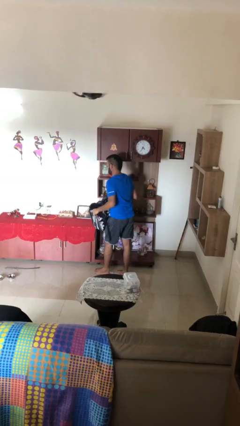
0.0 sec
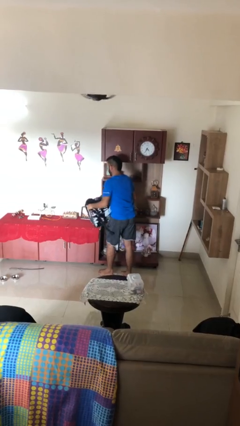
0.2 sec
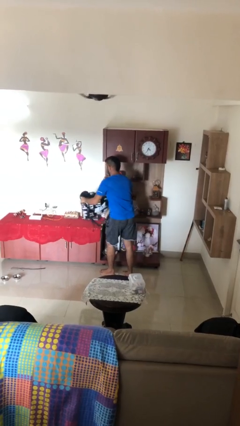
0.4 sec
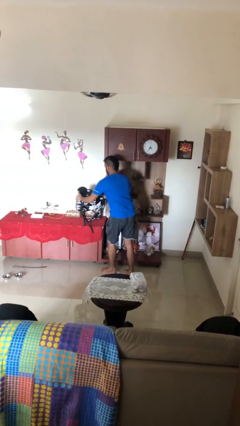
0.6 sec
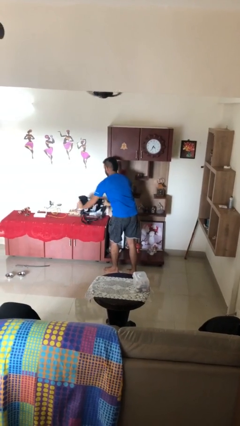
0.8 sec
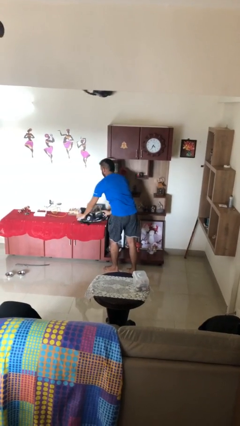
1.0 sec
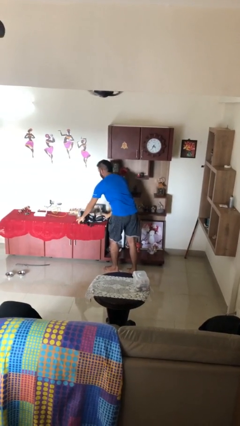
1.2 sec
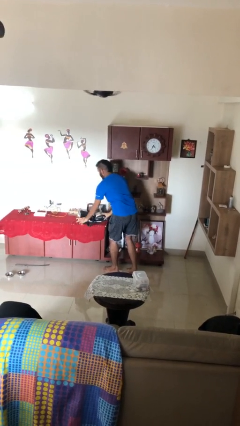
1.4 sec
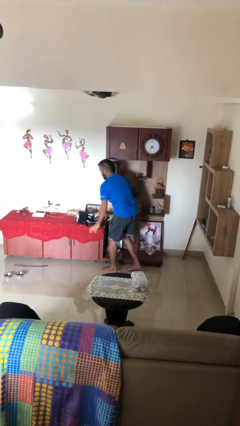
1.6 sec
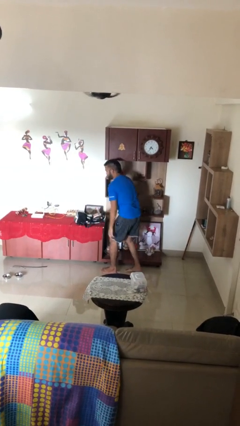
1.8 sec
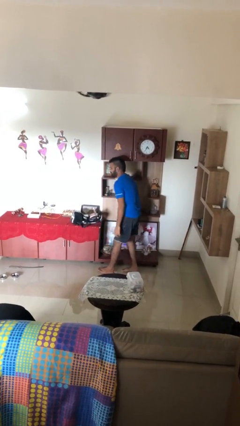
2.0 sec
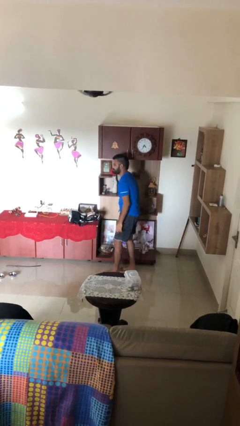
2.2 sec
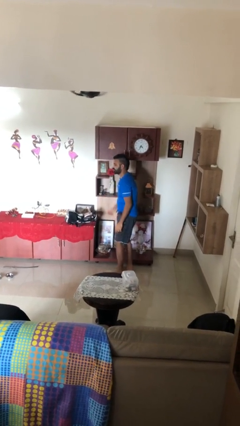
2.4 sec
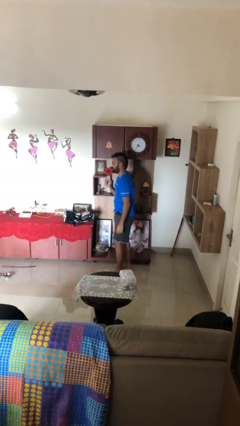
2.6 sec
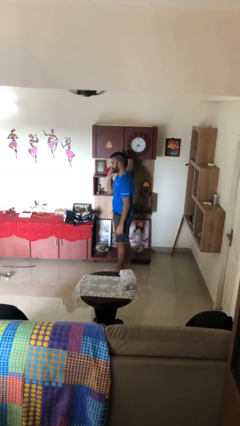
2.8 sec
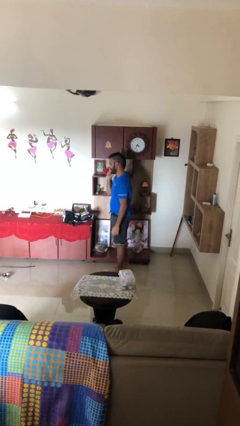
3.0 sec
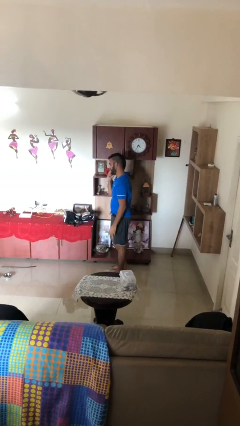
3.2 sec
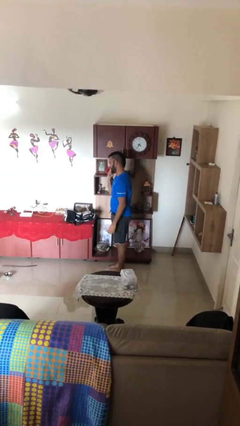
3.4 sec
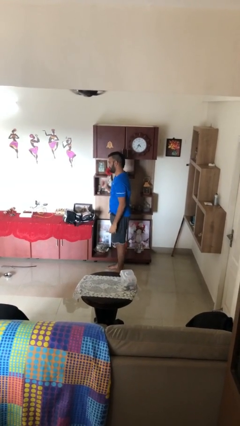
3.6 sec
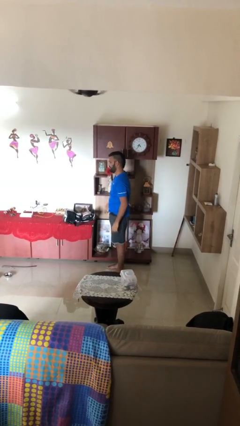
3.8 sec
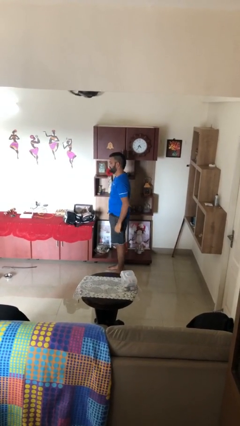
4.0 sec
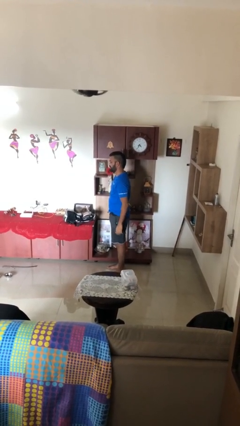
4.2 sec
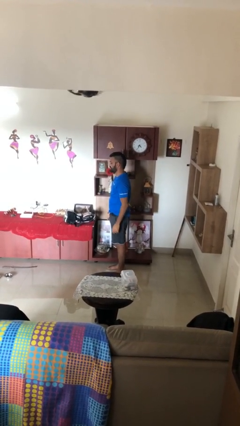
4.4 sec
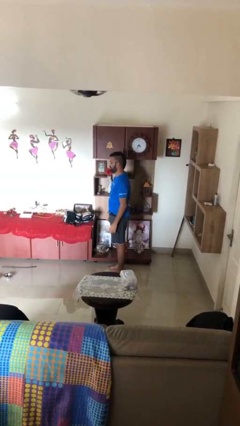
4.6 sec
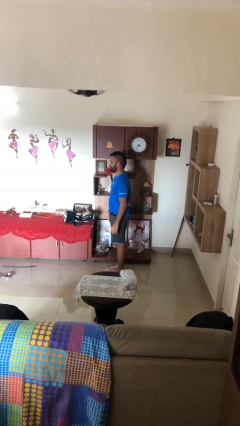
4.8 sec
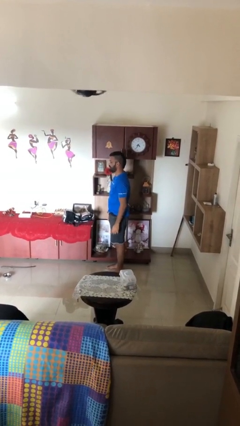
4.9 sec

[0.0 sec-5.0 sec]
person puts down object on table

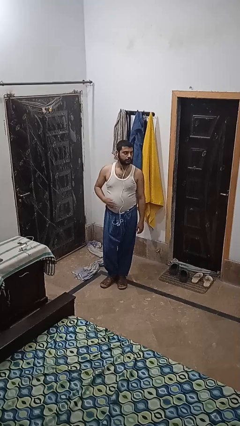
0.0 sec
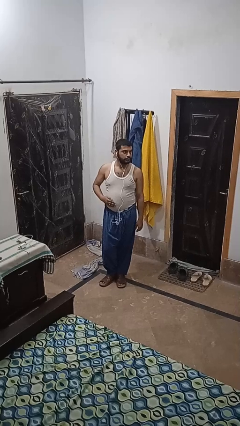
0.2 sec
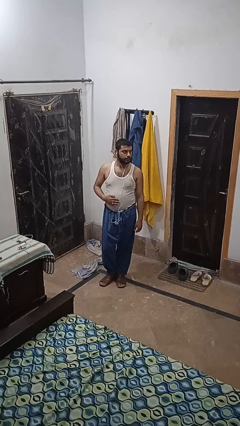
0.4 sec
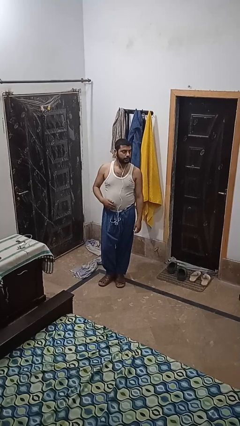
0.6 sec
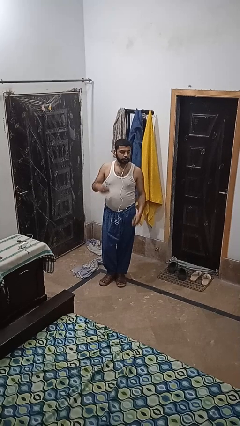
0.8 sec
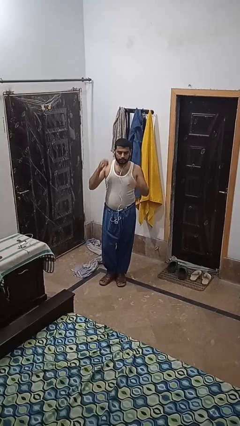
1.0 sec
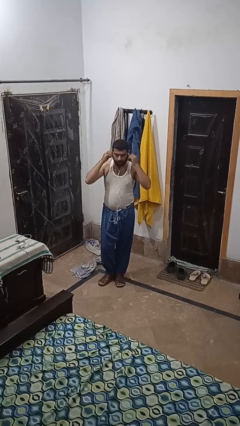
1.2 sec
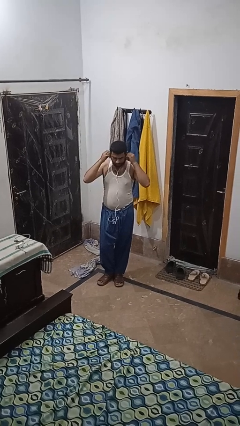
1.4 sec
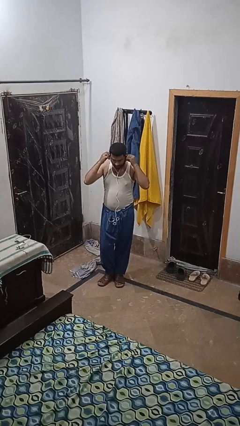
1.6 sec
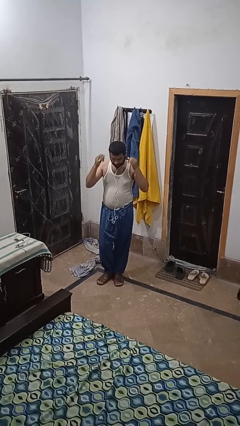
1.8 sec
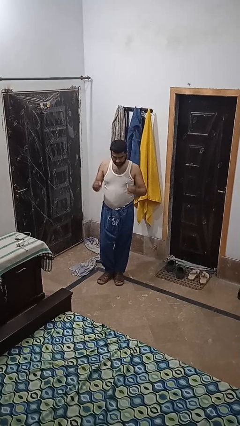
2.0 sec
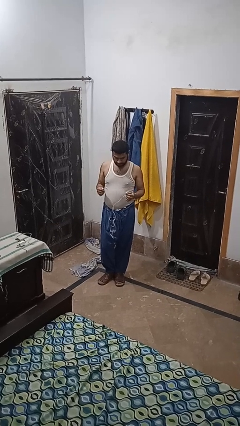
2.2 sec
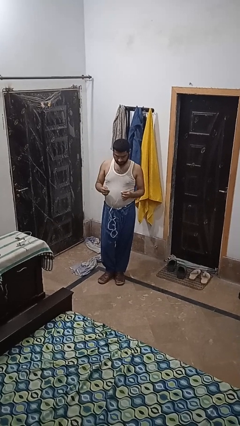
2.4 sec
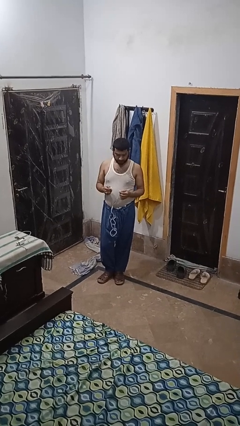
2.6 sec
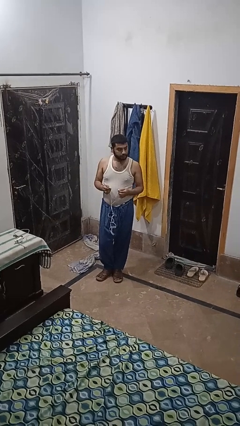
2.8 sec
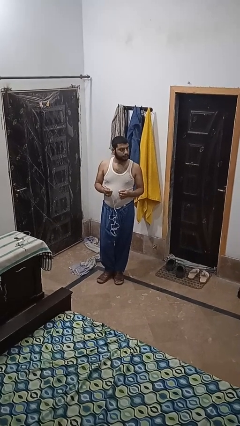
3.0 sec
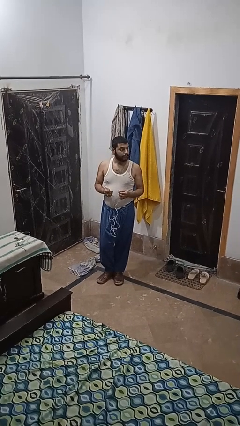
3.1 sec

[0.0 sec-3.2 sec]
person takes off headphones

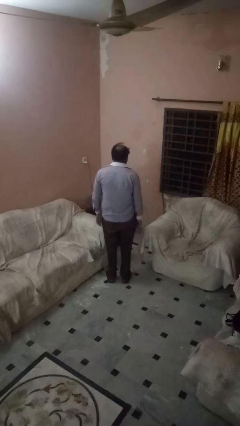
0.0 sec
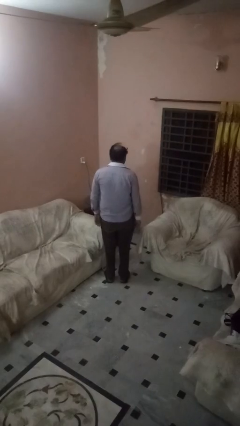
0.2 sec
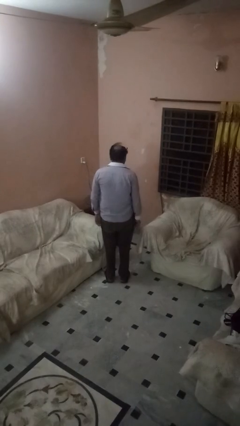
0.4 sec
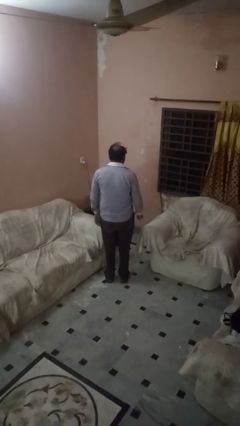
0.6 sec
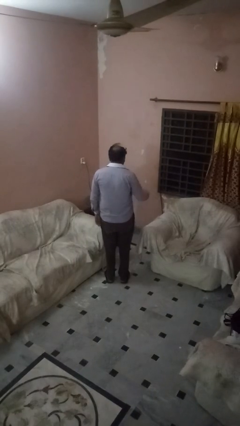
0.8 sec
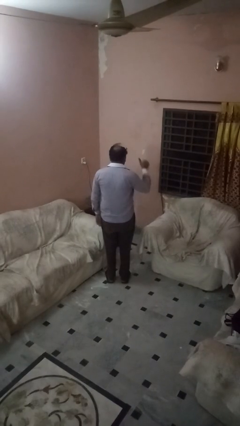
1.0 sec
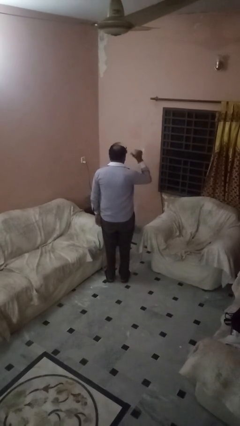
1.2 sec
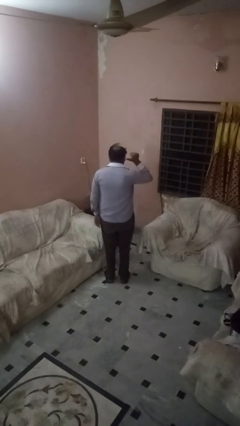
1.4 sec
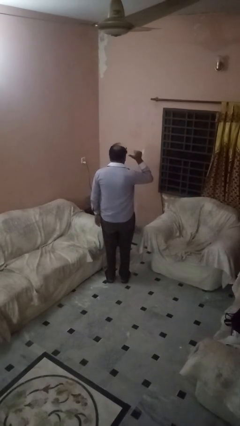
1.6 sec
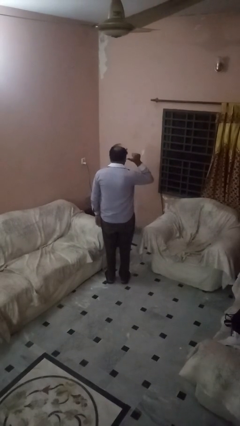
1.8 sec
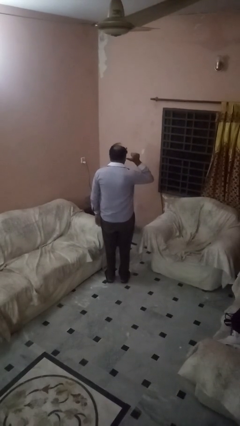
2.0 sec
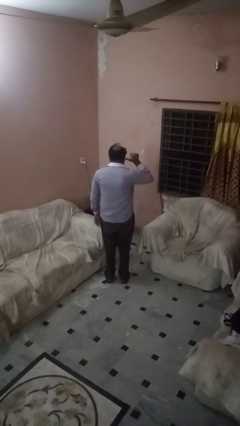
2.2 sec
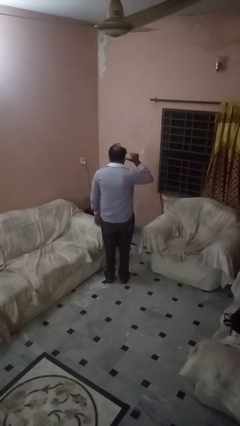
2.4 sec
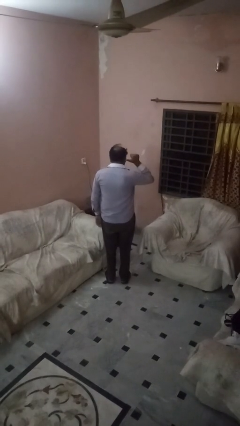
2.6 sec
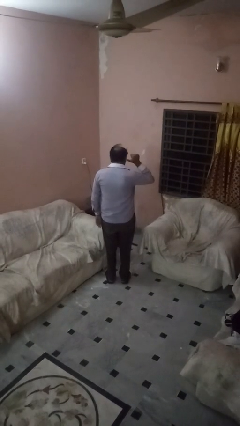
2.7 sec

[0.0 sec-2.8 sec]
person gestures behind me

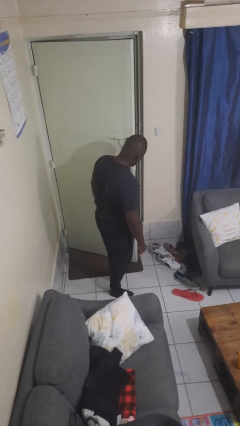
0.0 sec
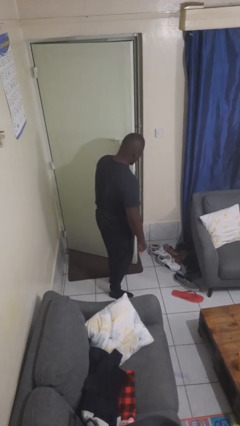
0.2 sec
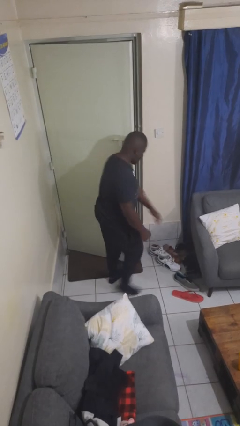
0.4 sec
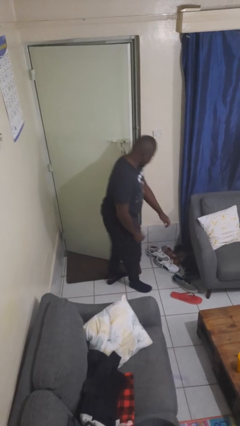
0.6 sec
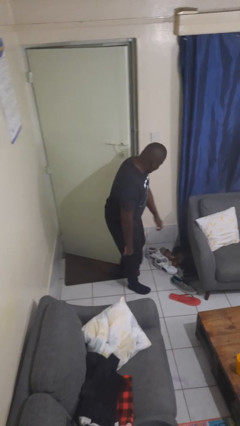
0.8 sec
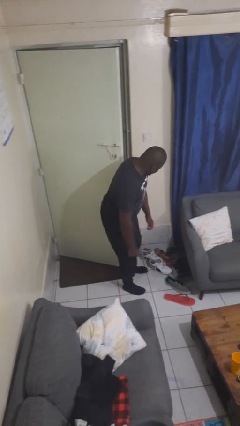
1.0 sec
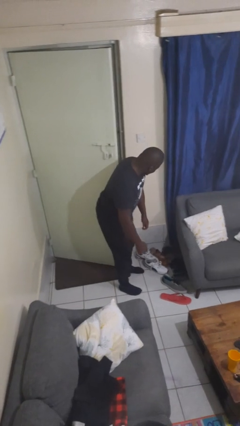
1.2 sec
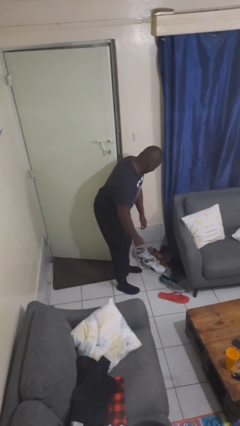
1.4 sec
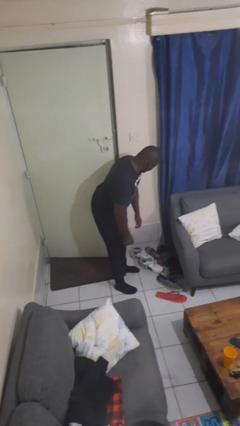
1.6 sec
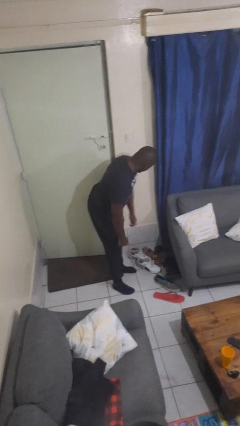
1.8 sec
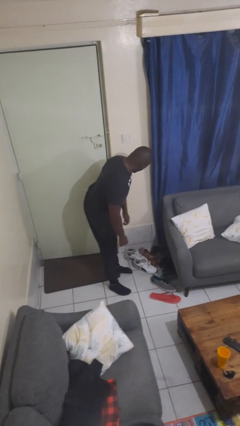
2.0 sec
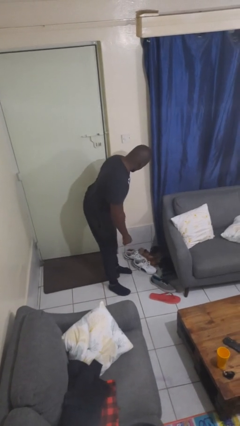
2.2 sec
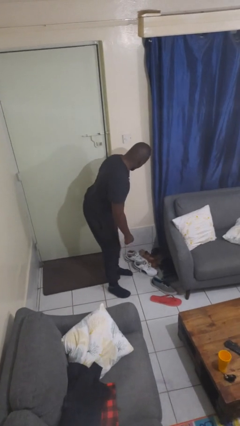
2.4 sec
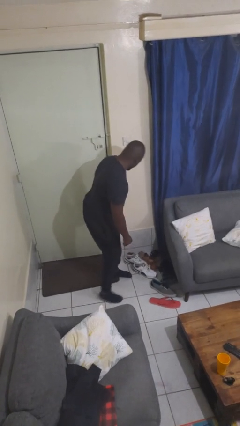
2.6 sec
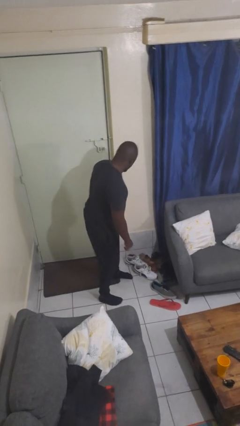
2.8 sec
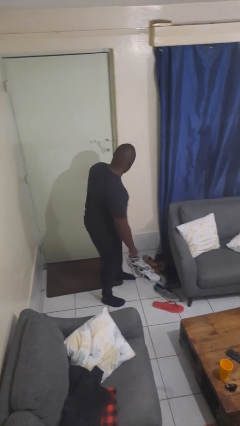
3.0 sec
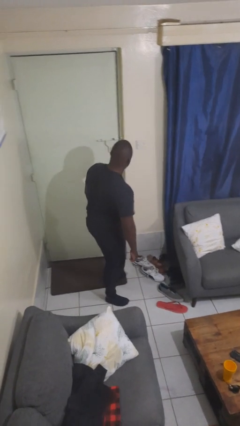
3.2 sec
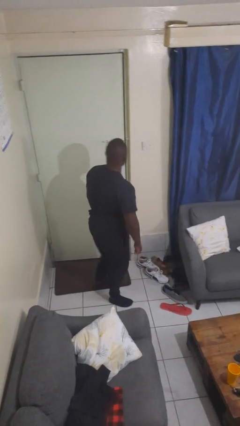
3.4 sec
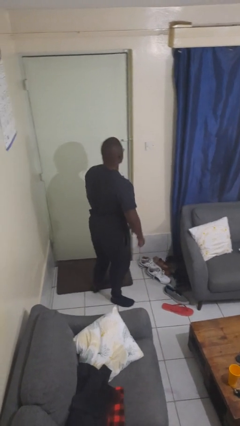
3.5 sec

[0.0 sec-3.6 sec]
person closes door with hip

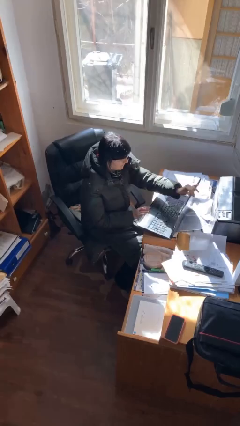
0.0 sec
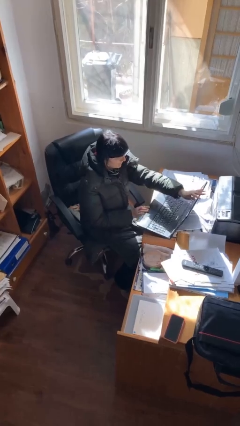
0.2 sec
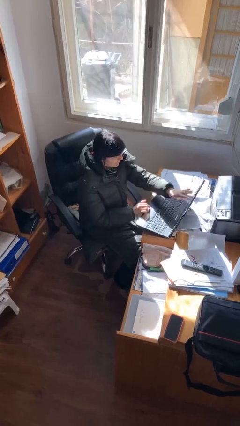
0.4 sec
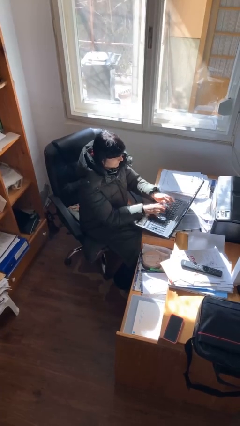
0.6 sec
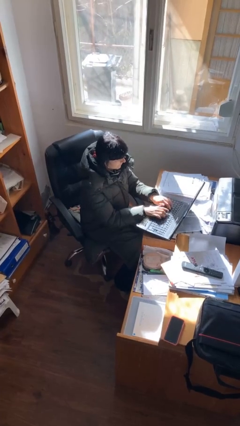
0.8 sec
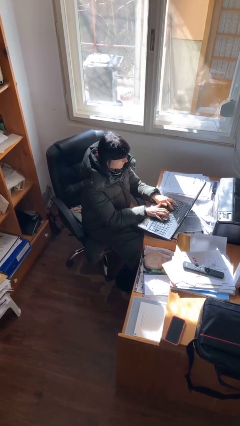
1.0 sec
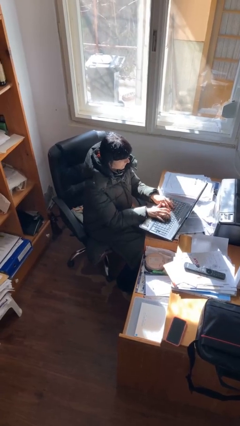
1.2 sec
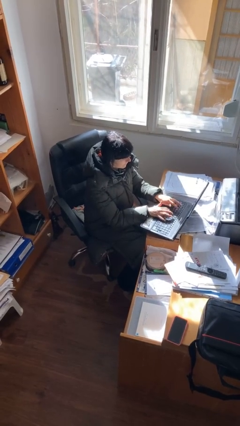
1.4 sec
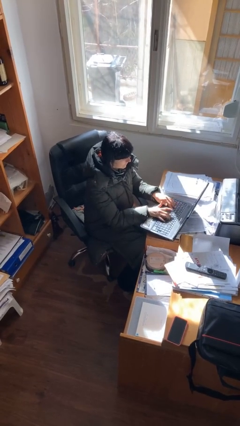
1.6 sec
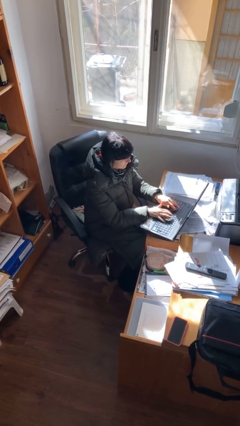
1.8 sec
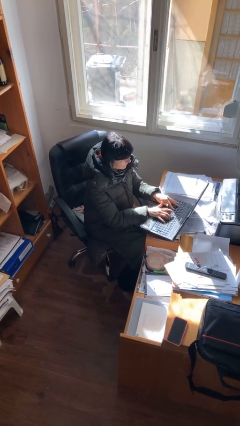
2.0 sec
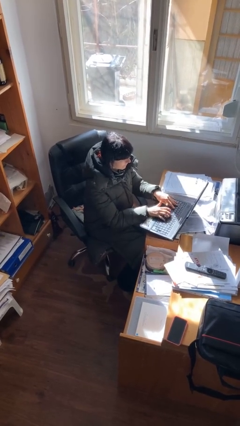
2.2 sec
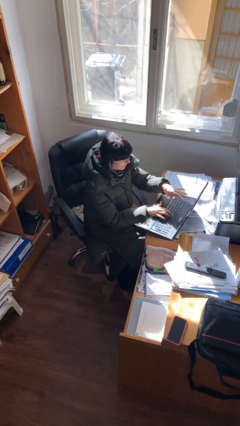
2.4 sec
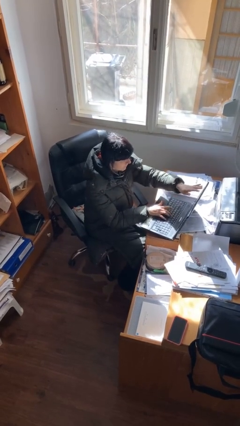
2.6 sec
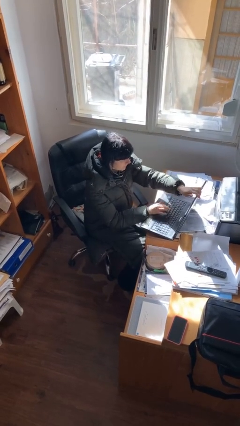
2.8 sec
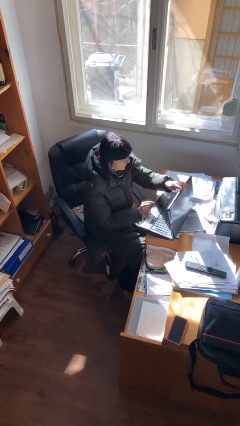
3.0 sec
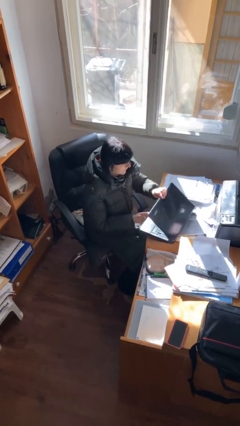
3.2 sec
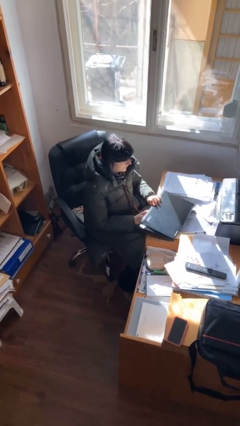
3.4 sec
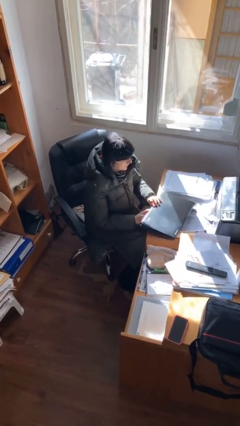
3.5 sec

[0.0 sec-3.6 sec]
person interacts with laptop
